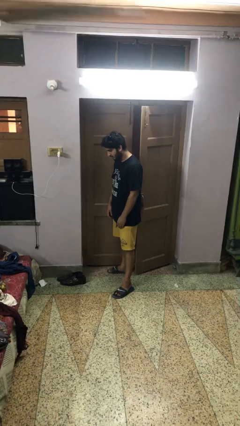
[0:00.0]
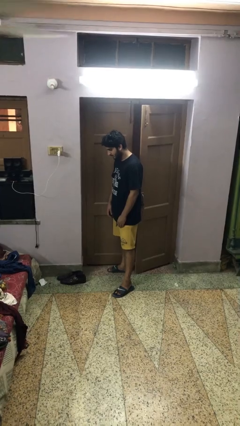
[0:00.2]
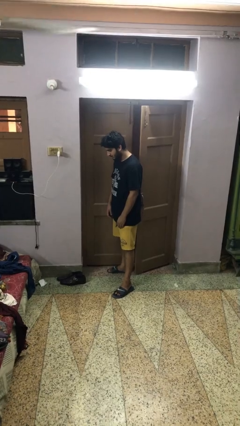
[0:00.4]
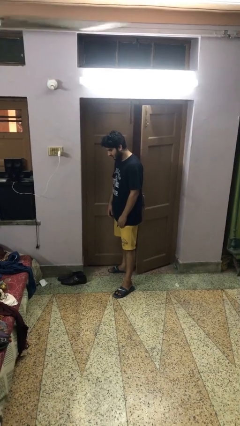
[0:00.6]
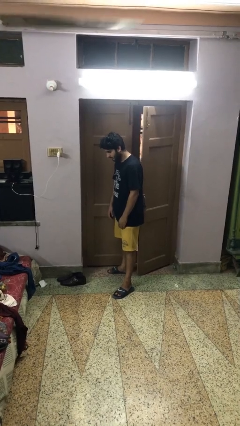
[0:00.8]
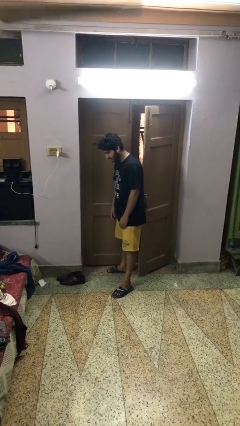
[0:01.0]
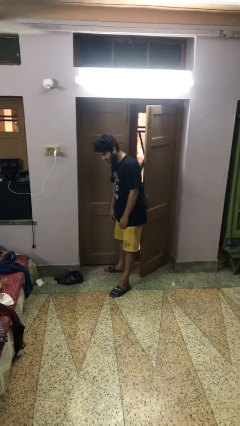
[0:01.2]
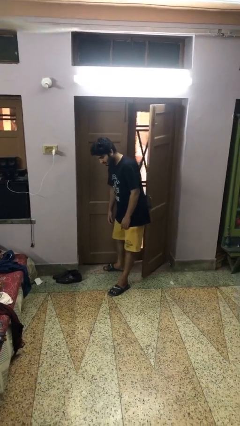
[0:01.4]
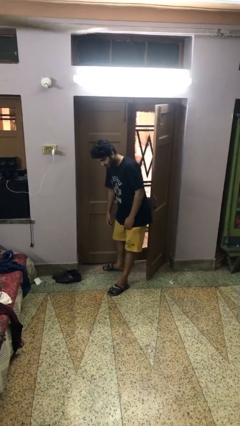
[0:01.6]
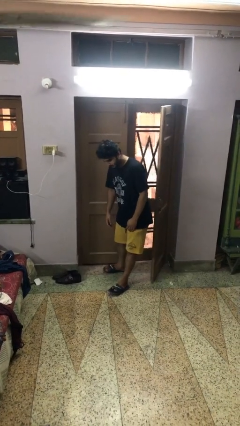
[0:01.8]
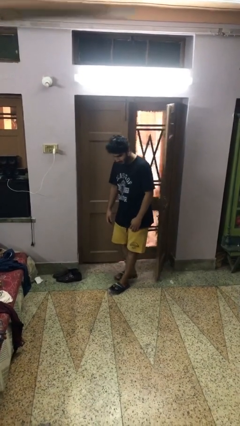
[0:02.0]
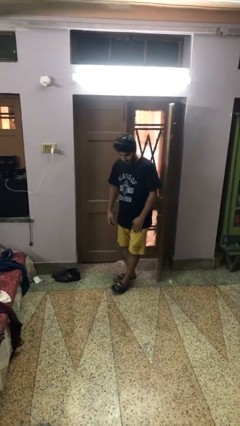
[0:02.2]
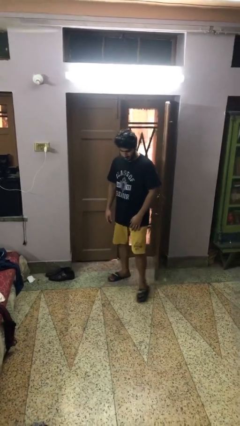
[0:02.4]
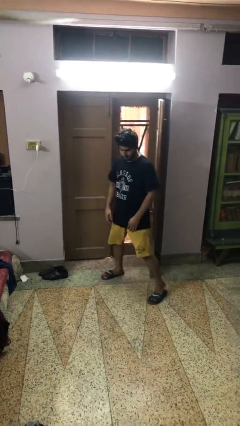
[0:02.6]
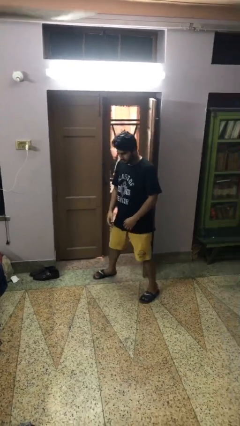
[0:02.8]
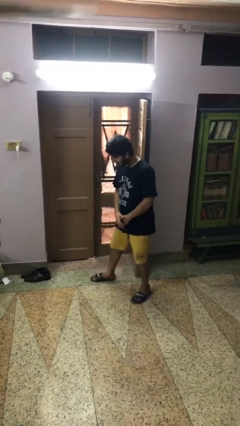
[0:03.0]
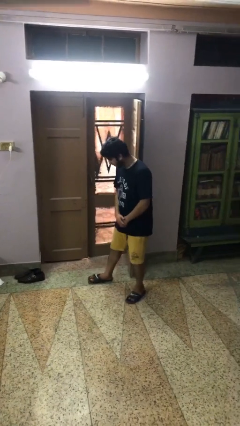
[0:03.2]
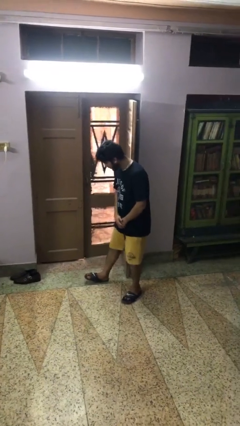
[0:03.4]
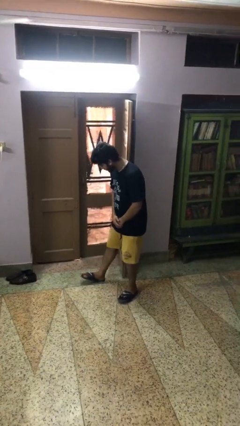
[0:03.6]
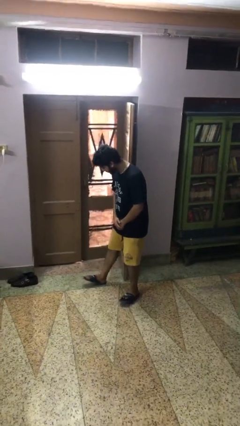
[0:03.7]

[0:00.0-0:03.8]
person opens facility door

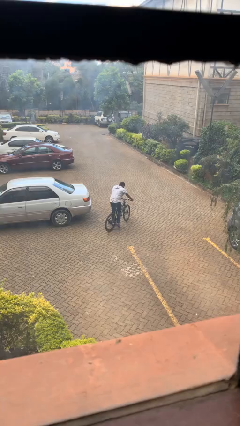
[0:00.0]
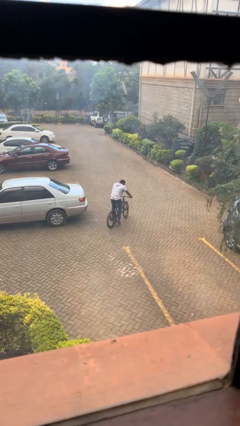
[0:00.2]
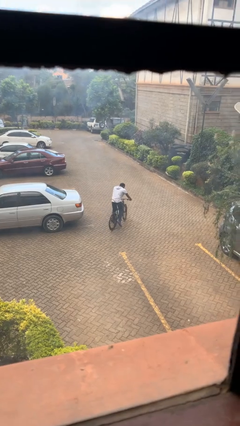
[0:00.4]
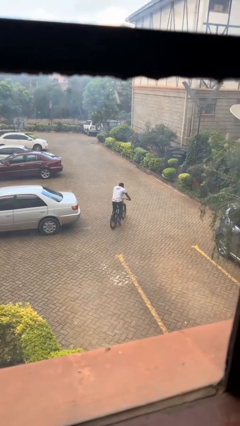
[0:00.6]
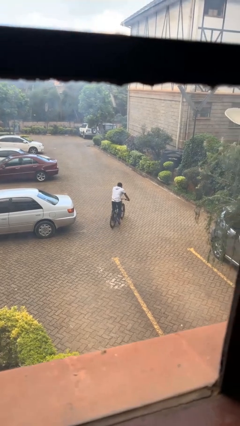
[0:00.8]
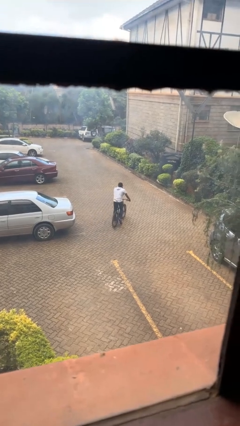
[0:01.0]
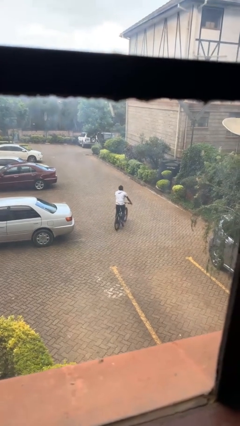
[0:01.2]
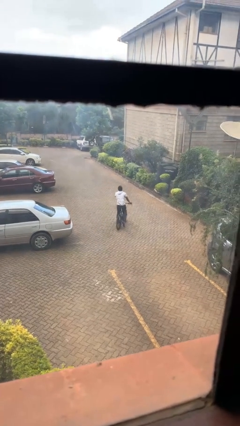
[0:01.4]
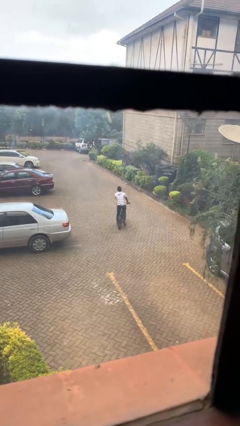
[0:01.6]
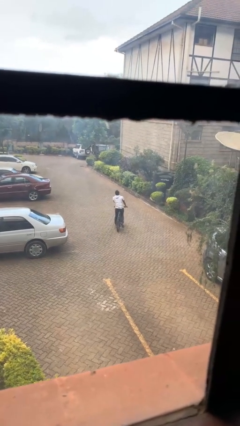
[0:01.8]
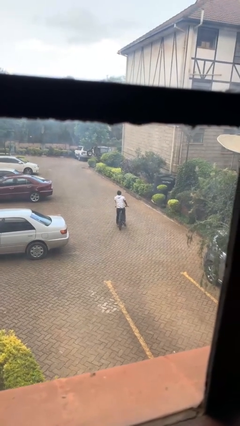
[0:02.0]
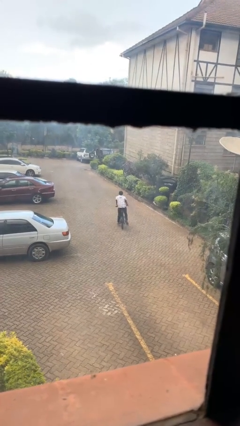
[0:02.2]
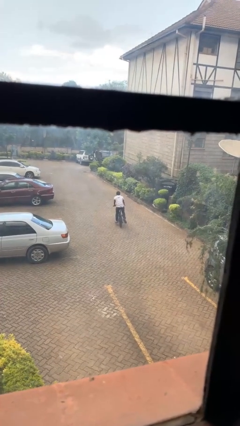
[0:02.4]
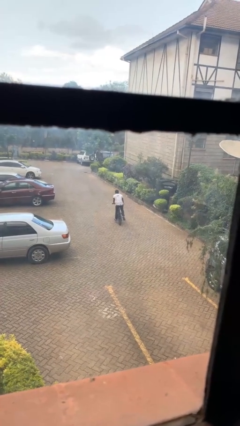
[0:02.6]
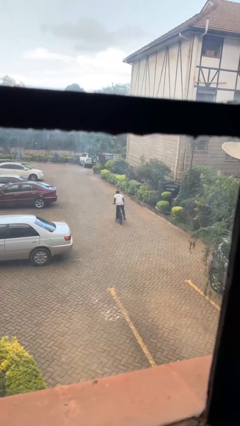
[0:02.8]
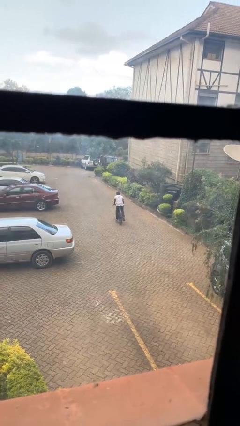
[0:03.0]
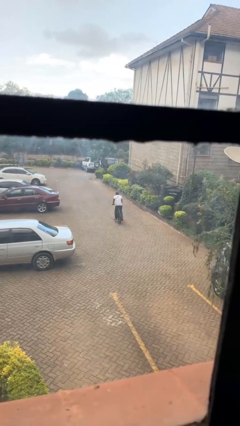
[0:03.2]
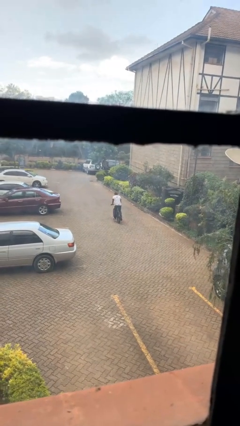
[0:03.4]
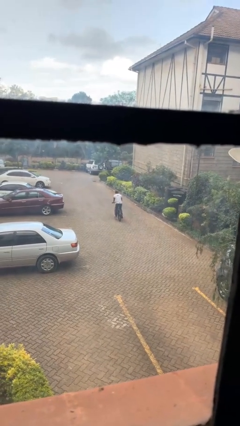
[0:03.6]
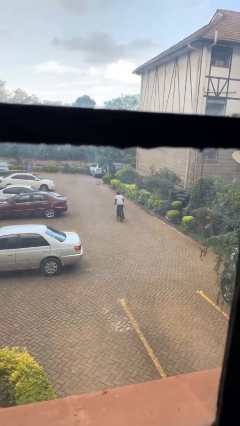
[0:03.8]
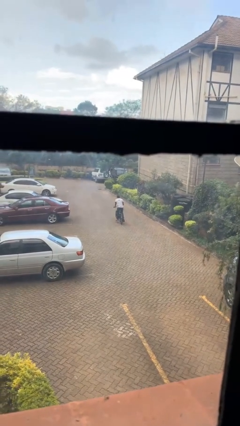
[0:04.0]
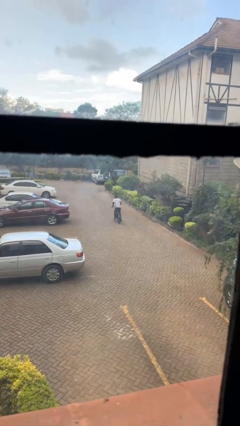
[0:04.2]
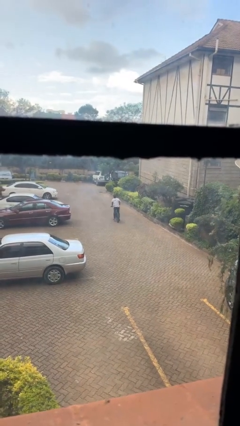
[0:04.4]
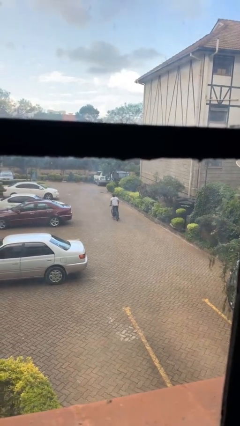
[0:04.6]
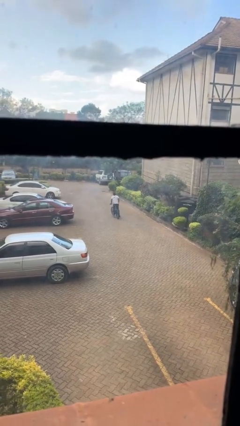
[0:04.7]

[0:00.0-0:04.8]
person rides bicycle

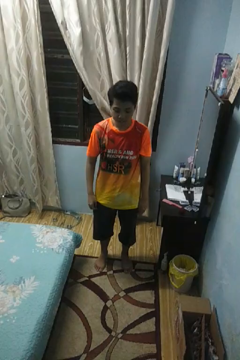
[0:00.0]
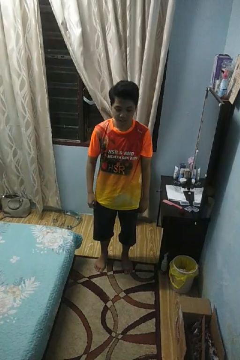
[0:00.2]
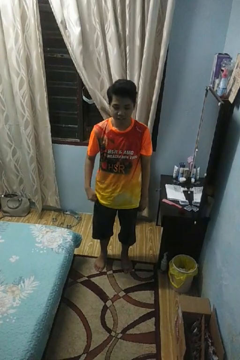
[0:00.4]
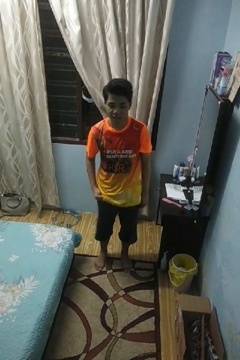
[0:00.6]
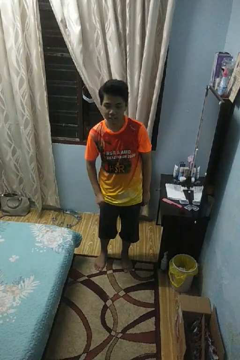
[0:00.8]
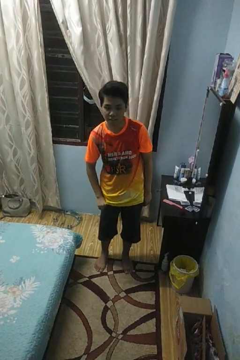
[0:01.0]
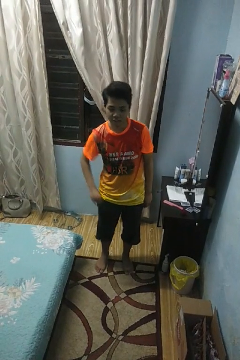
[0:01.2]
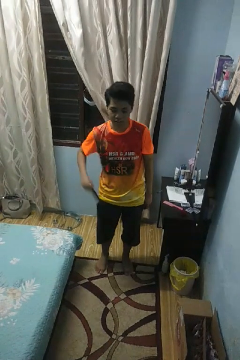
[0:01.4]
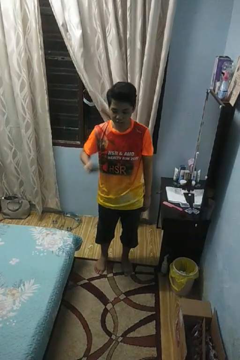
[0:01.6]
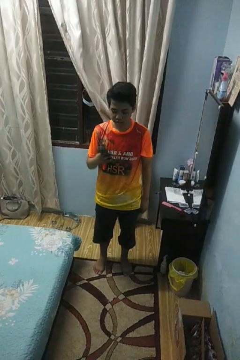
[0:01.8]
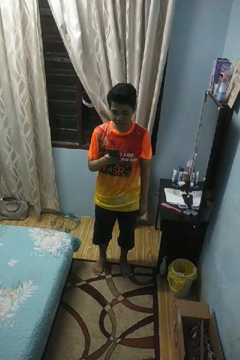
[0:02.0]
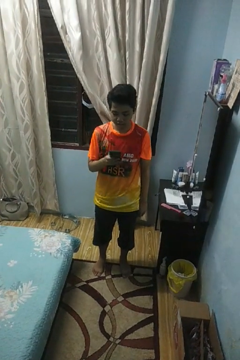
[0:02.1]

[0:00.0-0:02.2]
person takes phone from pocket

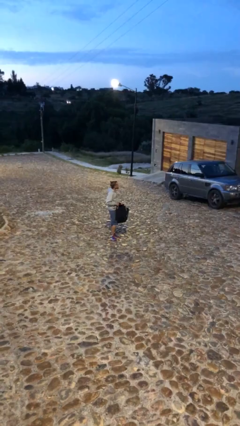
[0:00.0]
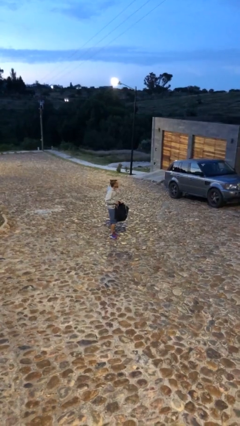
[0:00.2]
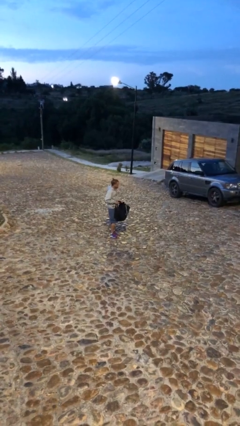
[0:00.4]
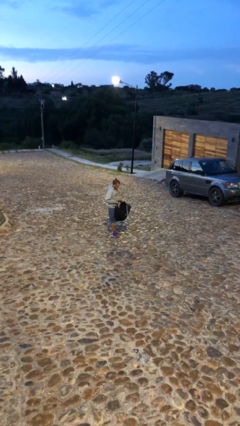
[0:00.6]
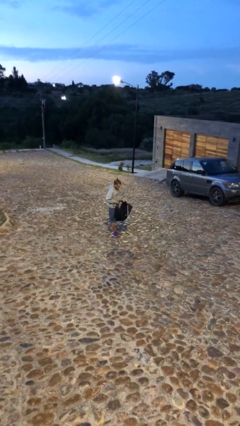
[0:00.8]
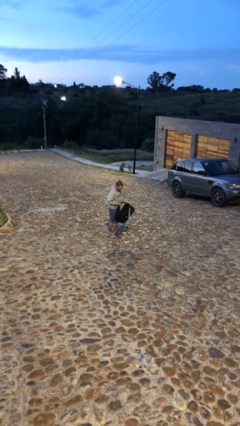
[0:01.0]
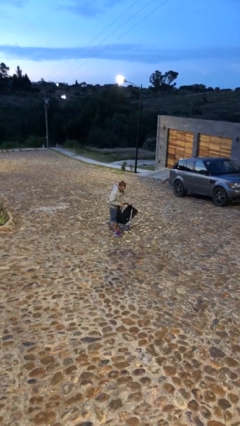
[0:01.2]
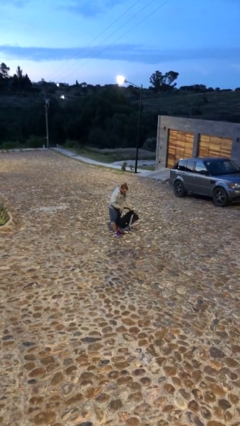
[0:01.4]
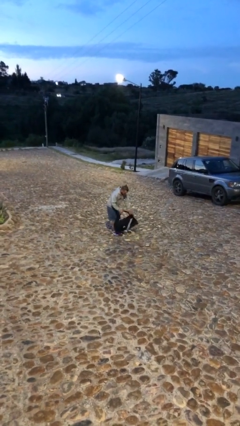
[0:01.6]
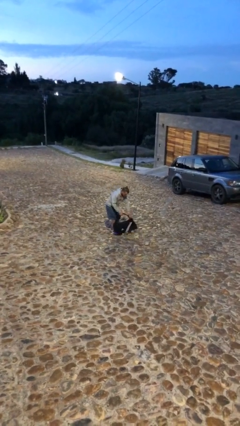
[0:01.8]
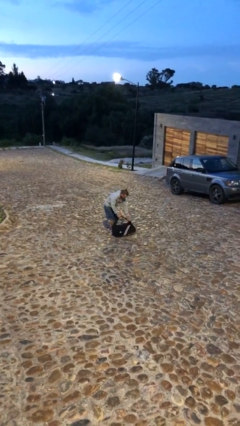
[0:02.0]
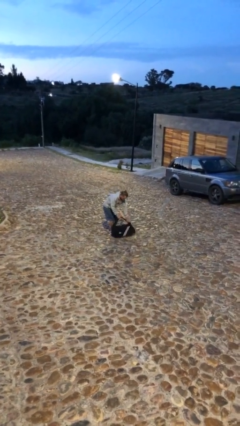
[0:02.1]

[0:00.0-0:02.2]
person puts down object on floor

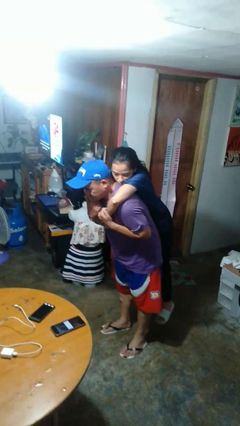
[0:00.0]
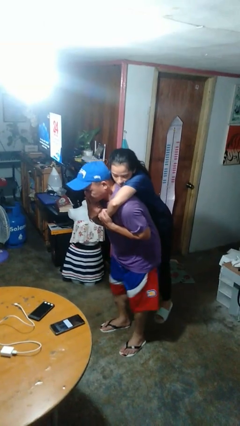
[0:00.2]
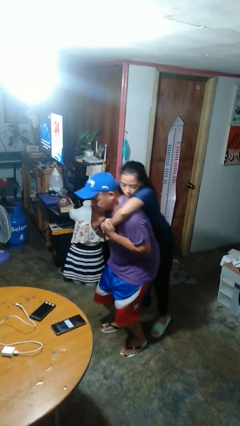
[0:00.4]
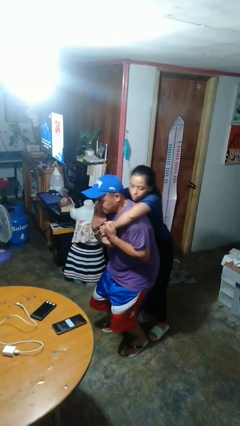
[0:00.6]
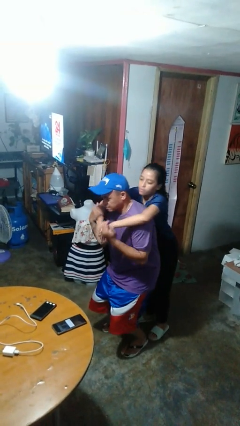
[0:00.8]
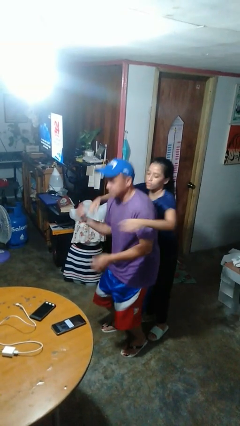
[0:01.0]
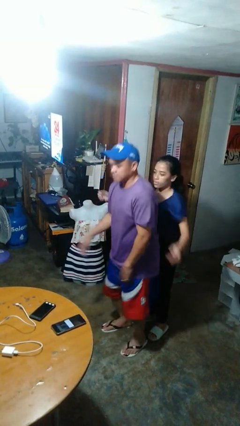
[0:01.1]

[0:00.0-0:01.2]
person puts down person

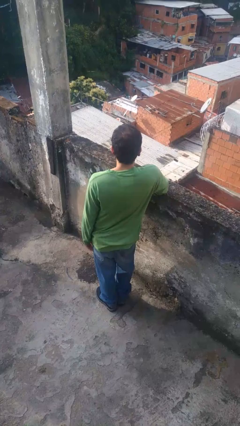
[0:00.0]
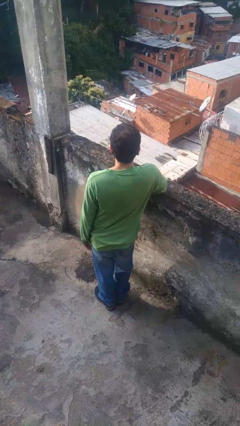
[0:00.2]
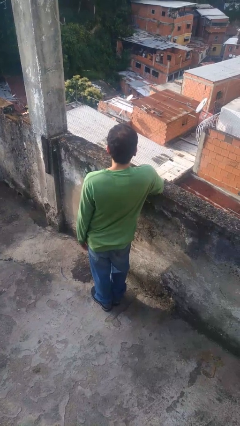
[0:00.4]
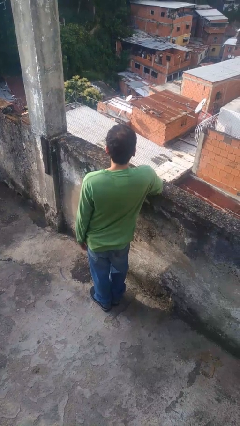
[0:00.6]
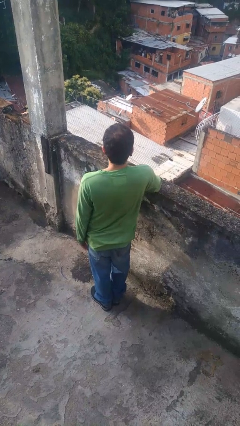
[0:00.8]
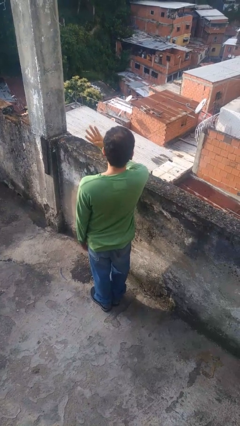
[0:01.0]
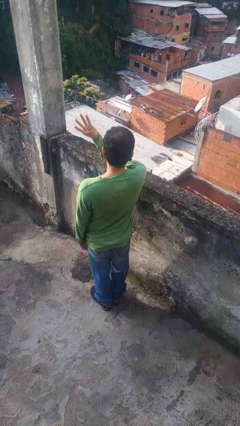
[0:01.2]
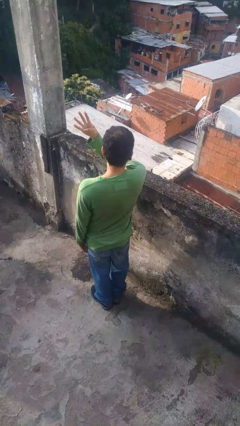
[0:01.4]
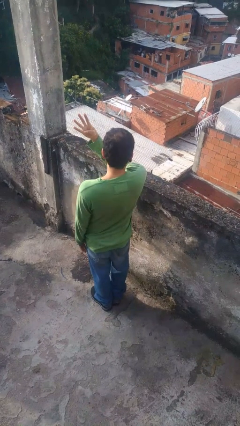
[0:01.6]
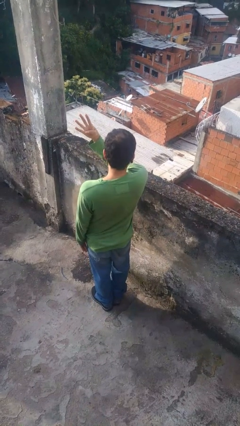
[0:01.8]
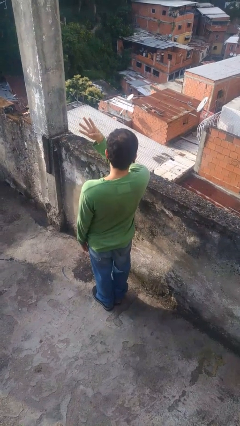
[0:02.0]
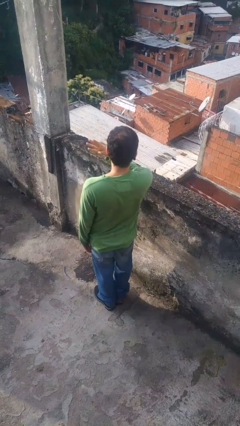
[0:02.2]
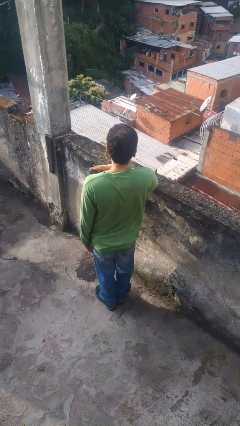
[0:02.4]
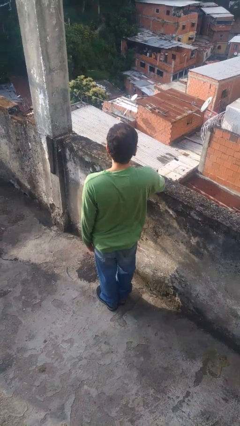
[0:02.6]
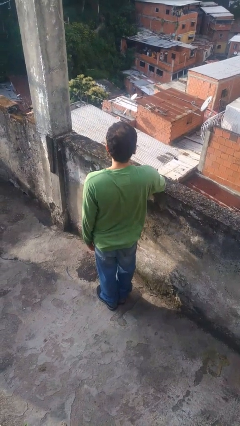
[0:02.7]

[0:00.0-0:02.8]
person gestures number four

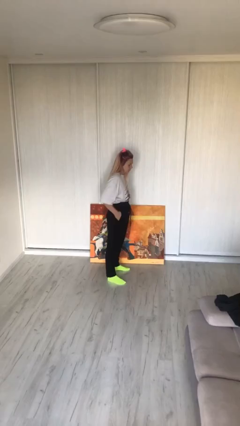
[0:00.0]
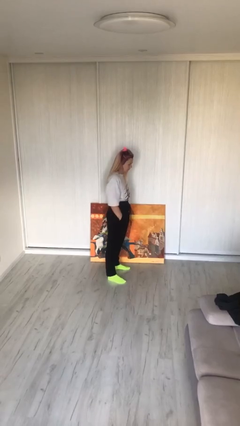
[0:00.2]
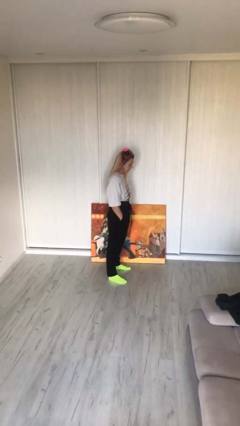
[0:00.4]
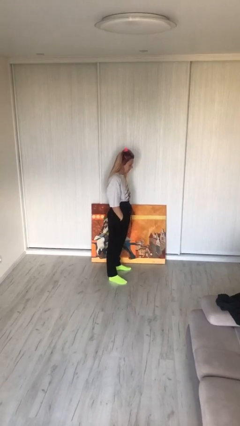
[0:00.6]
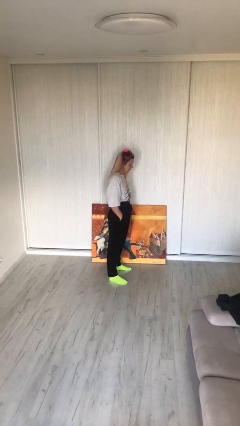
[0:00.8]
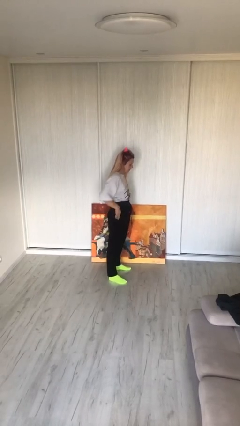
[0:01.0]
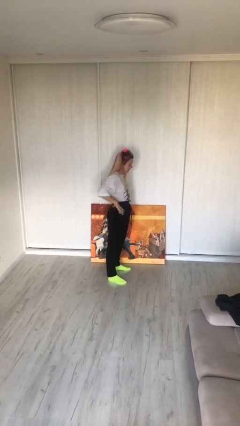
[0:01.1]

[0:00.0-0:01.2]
person puts hands in back pockets
